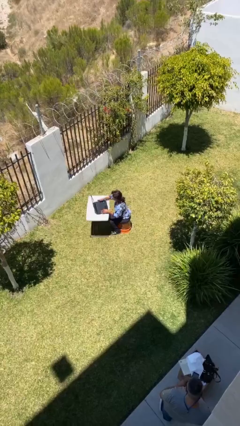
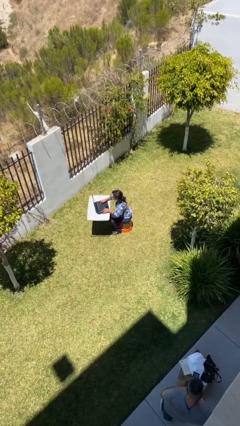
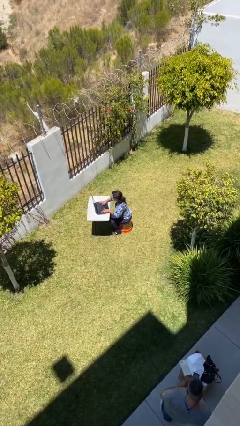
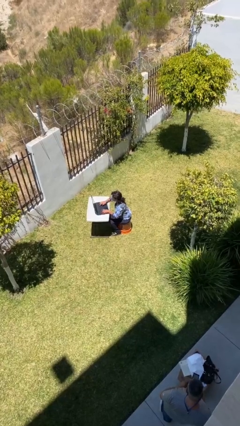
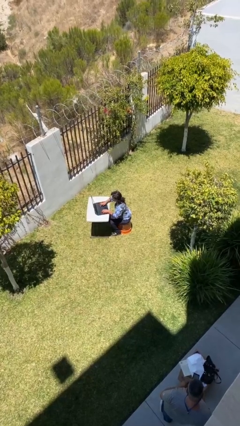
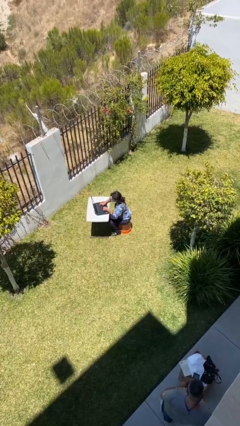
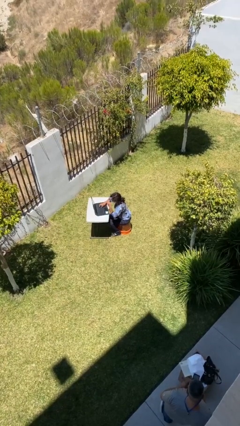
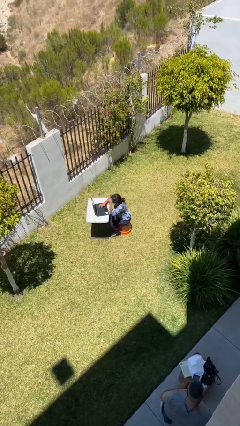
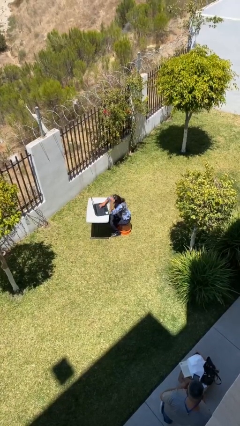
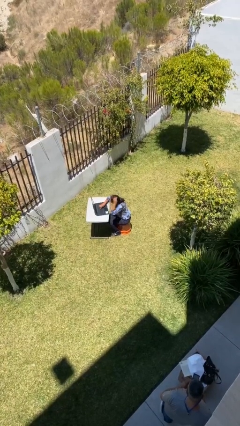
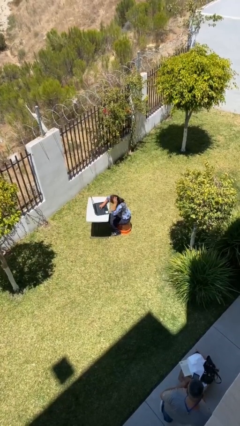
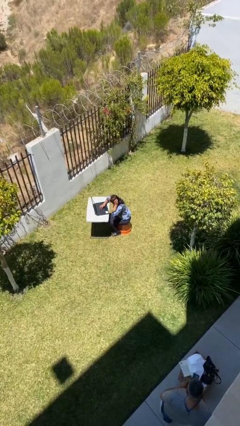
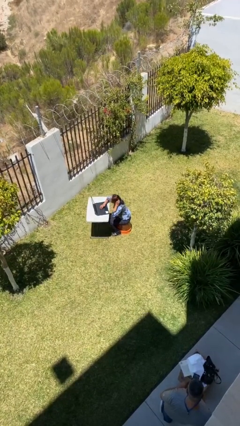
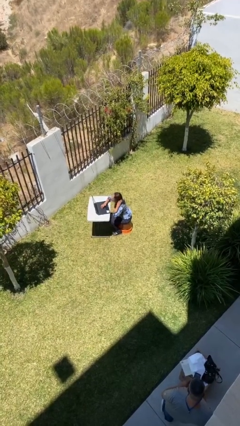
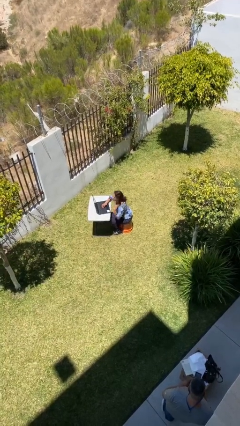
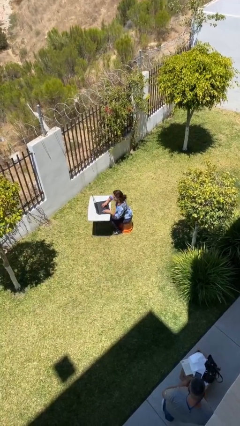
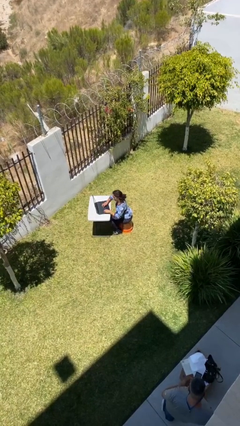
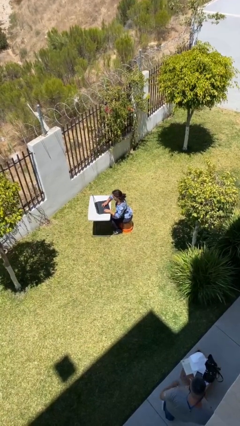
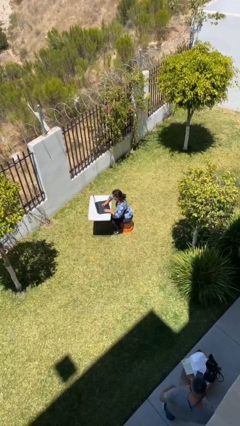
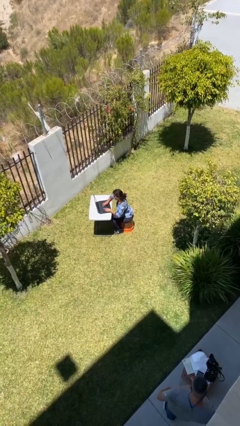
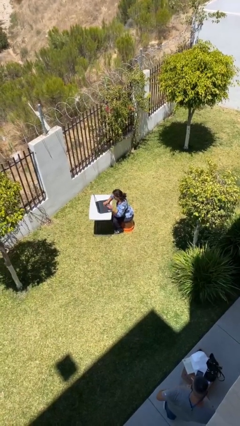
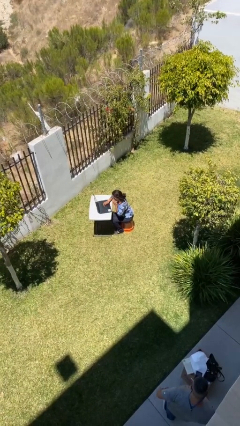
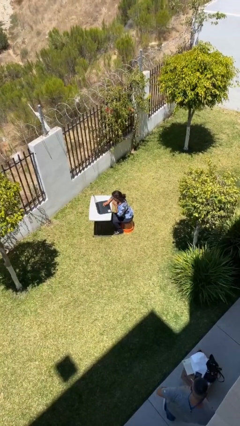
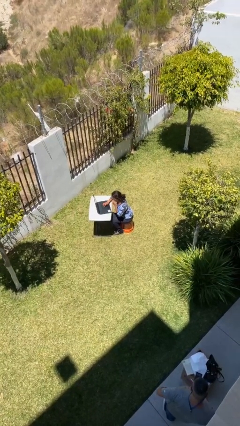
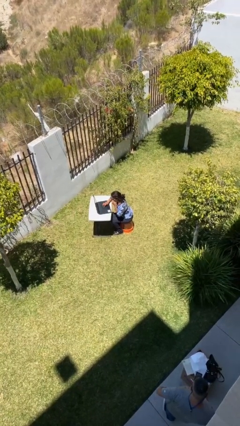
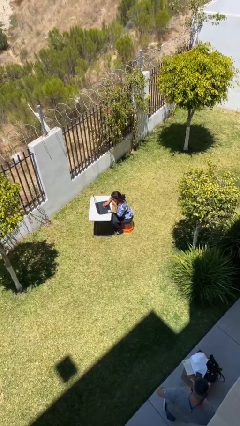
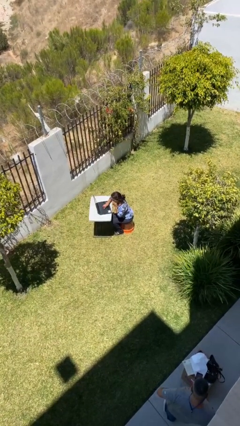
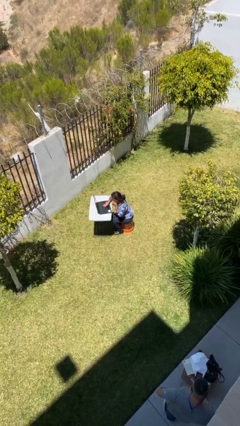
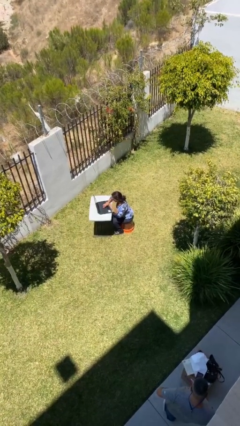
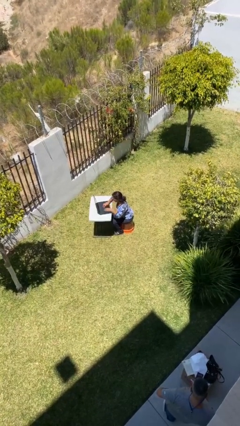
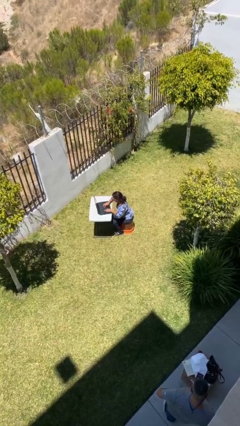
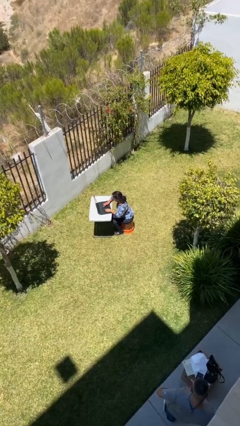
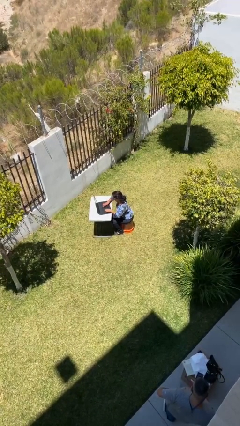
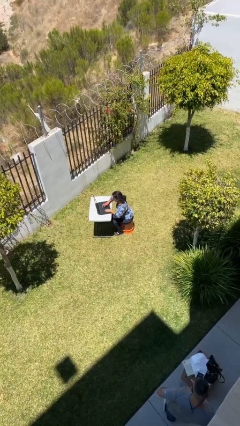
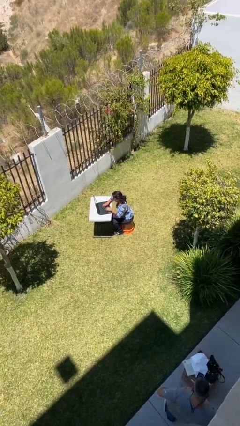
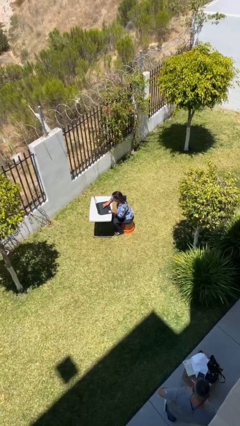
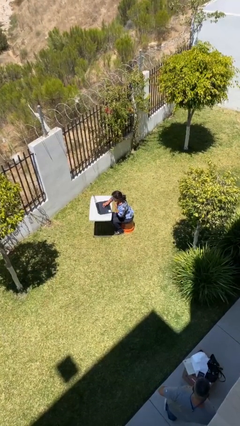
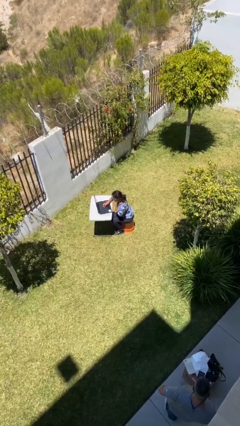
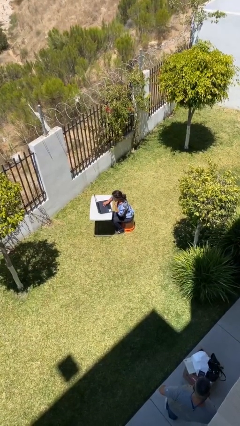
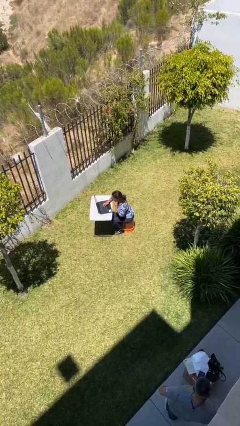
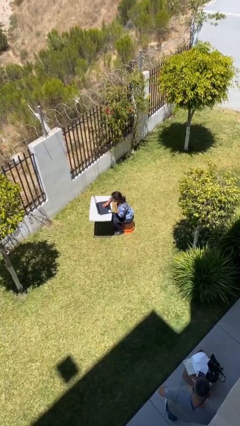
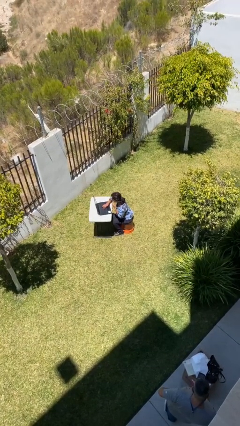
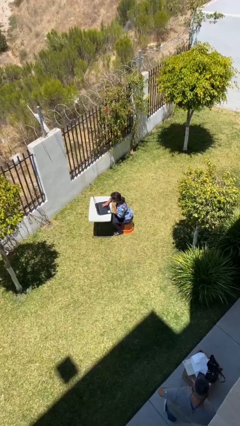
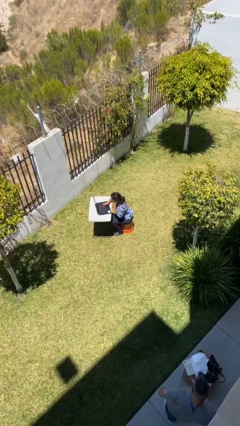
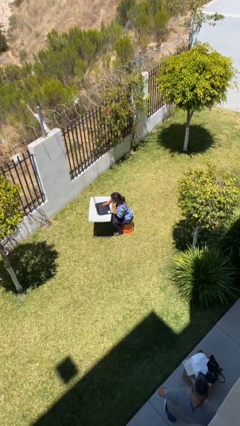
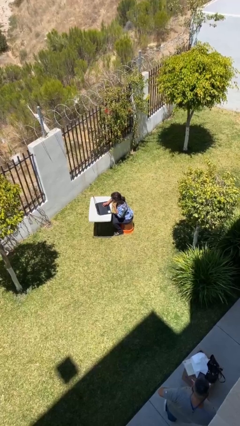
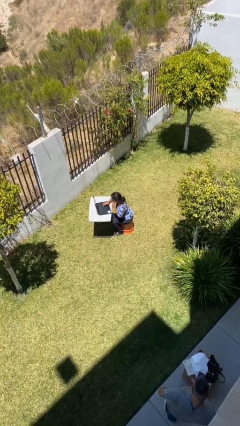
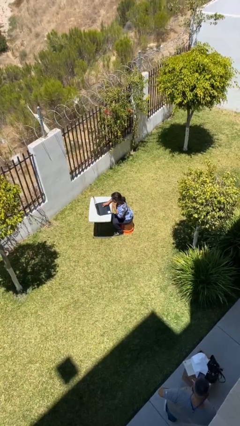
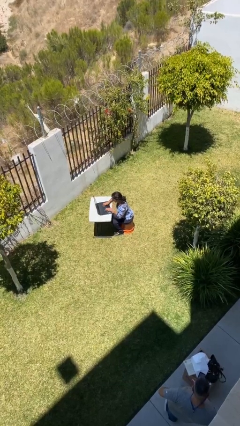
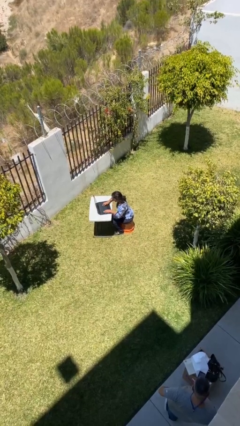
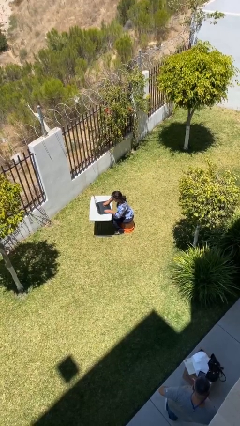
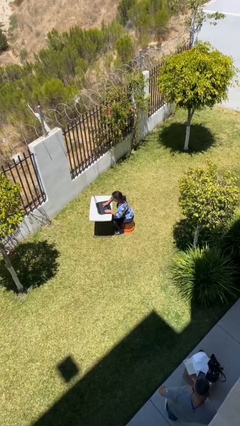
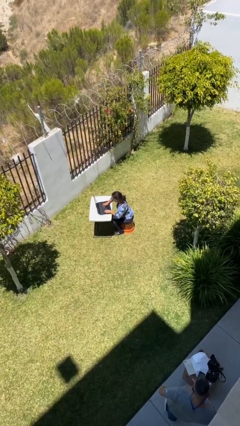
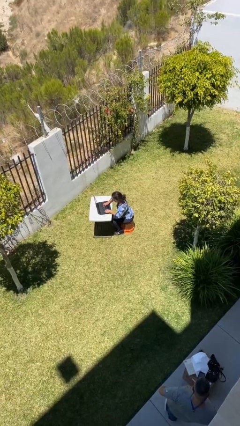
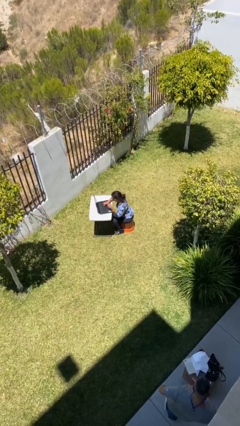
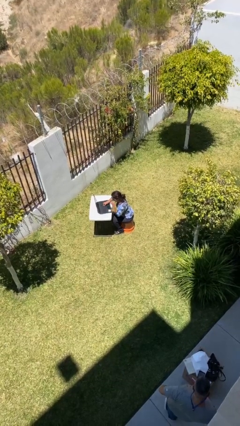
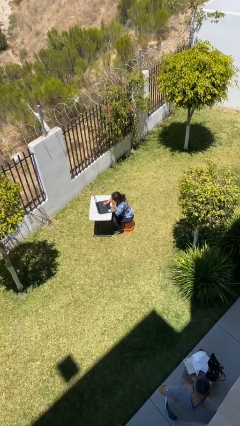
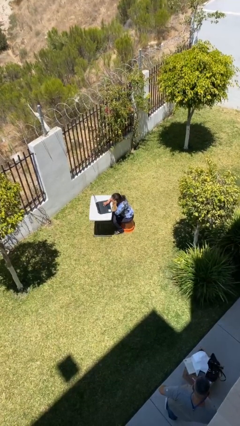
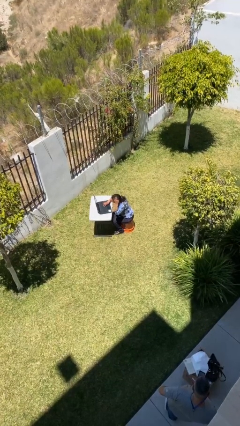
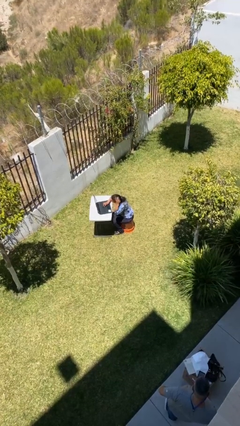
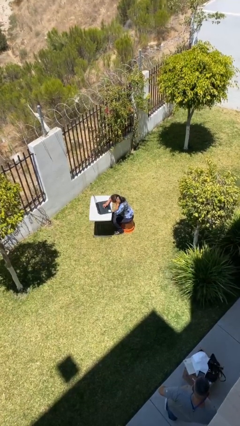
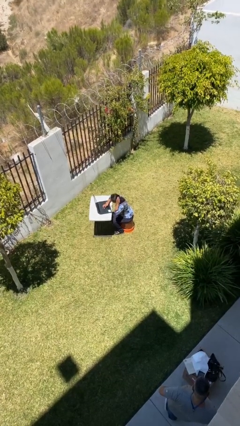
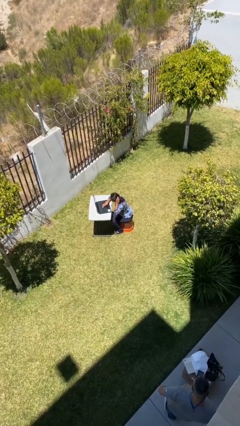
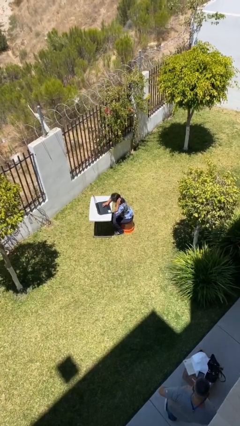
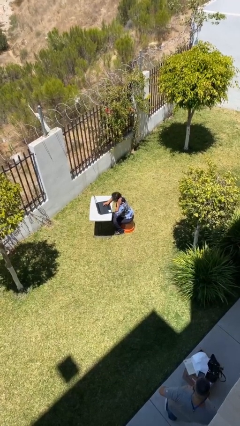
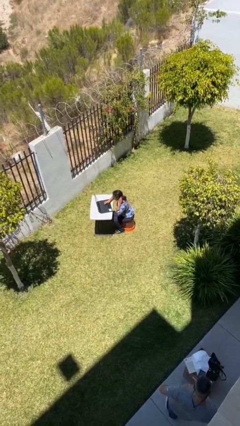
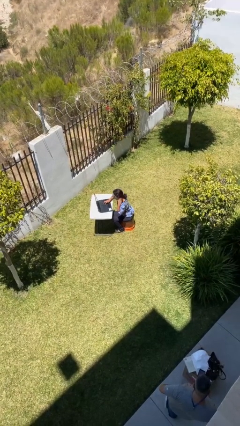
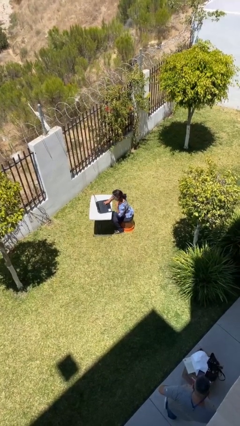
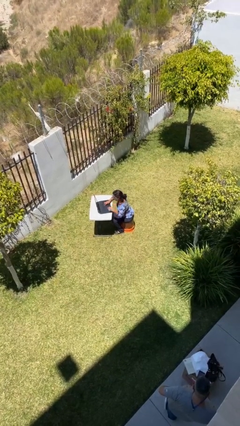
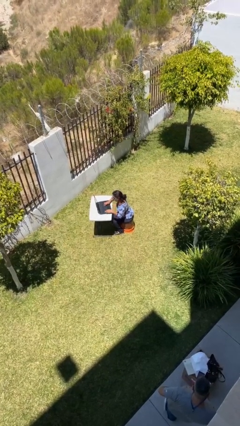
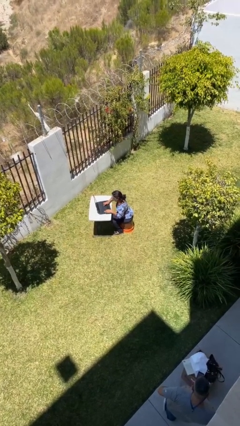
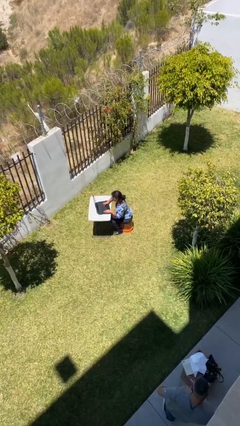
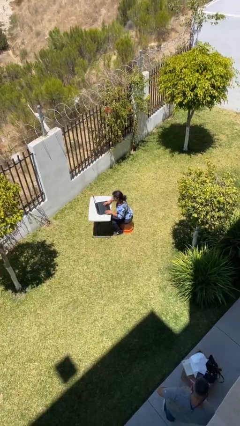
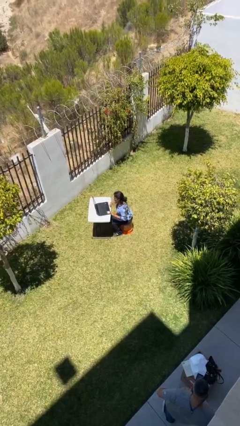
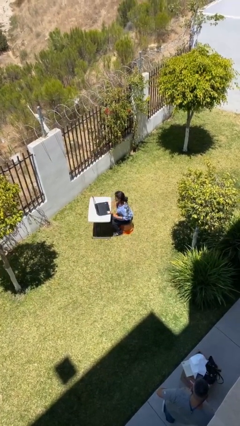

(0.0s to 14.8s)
person interacts with laptop

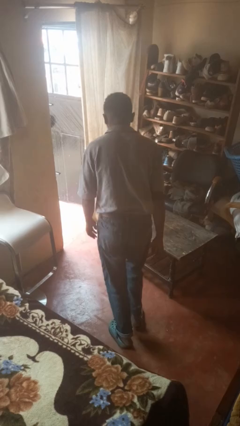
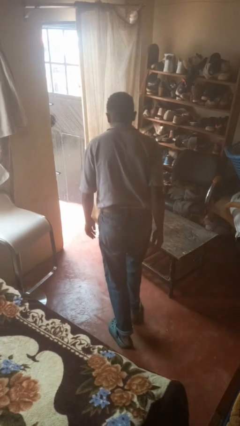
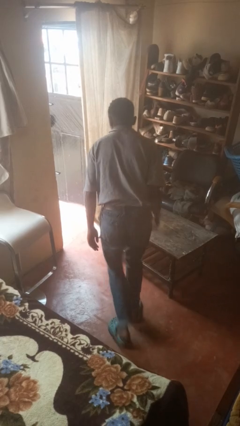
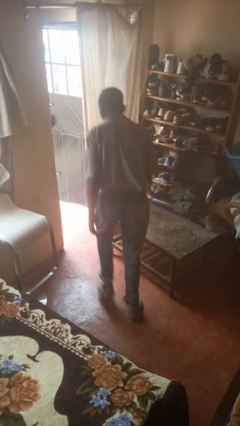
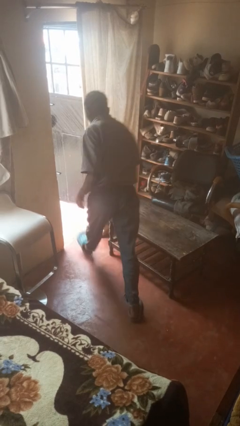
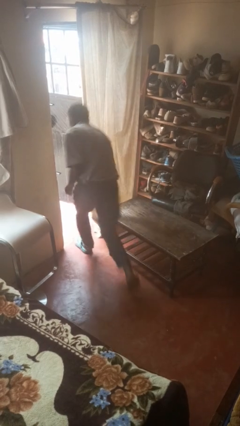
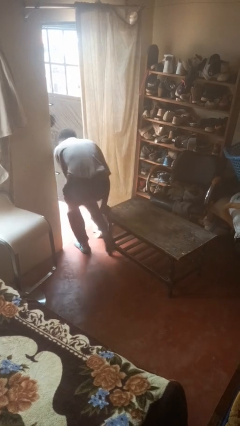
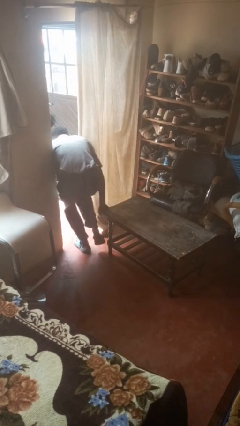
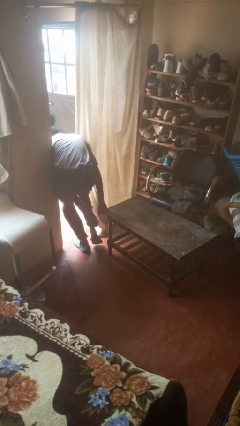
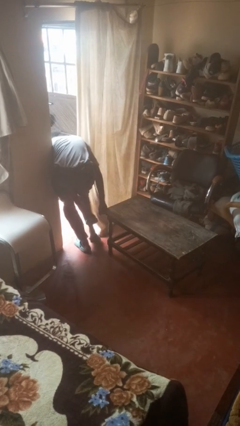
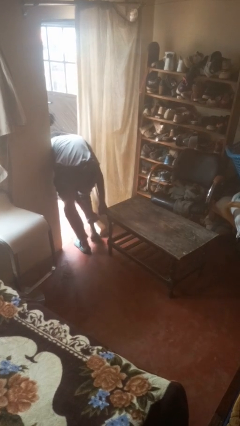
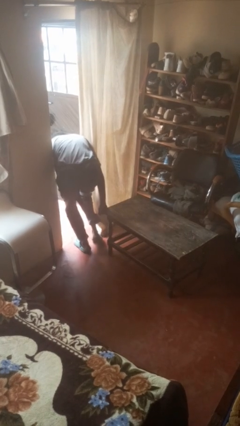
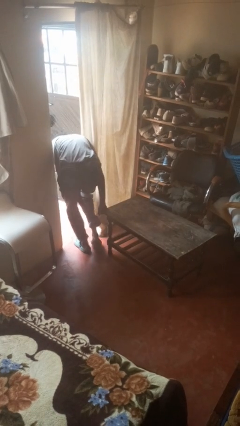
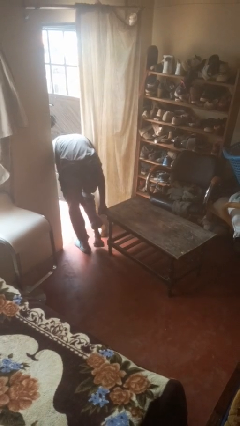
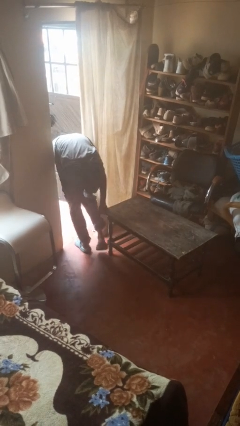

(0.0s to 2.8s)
person bumps into table

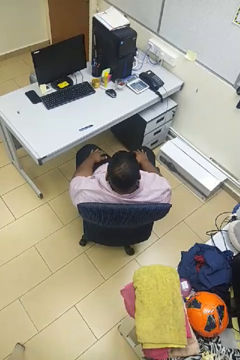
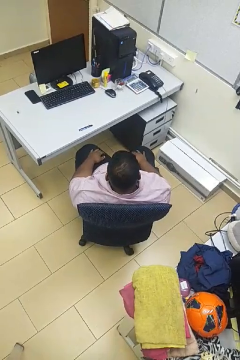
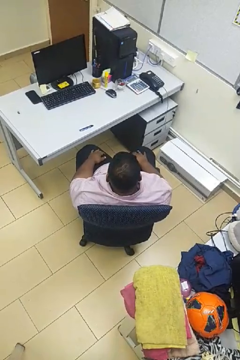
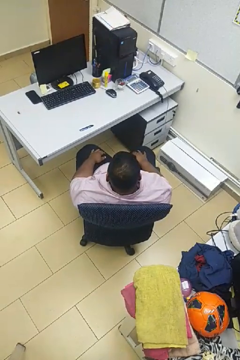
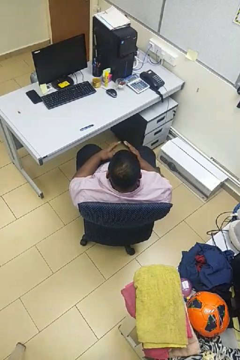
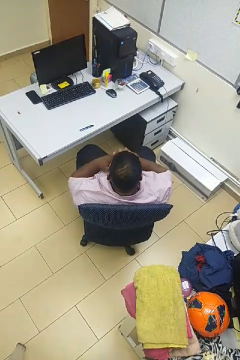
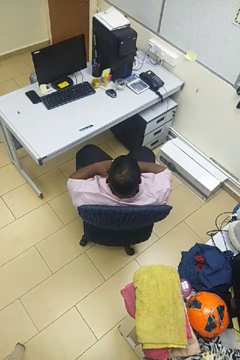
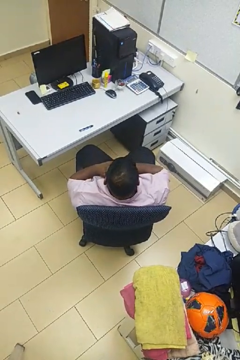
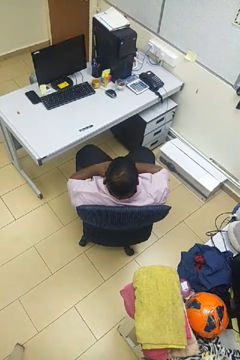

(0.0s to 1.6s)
person covers face with hands
